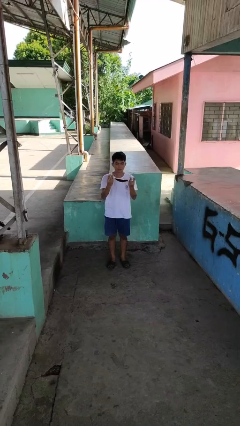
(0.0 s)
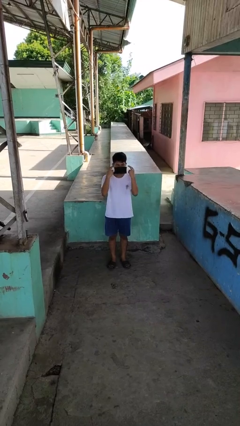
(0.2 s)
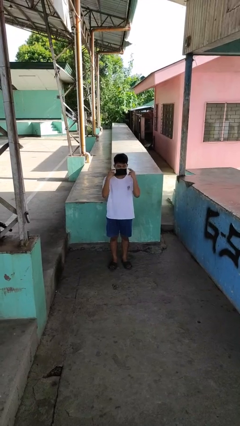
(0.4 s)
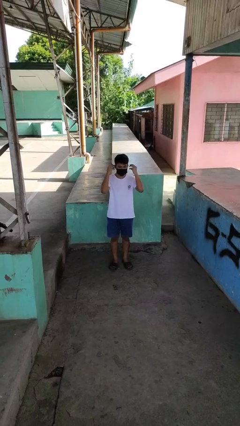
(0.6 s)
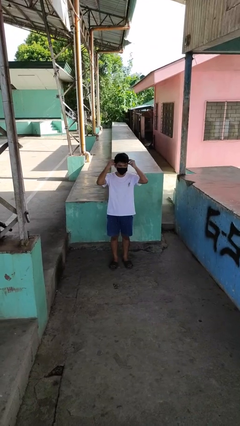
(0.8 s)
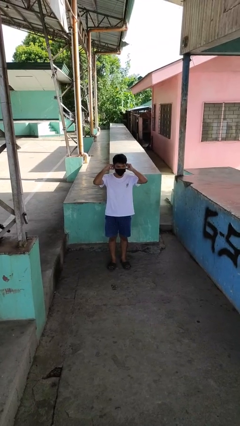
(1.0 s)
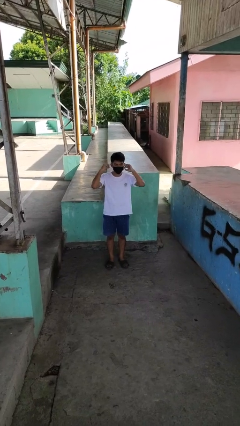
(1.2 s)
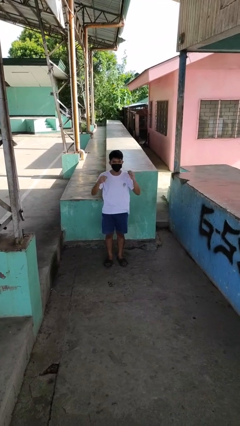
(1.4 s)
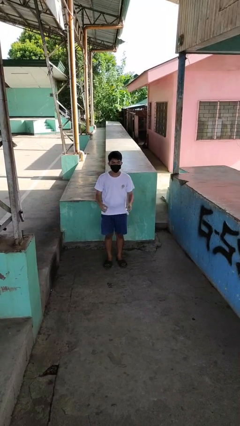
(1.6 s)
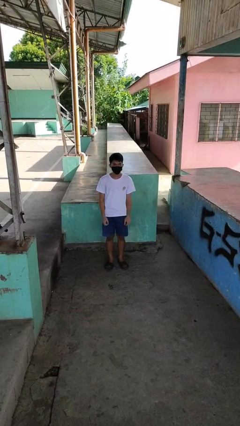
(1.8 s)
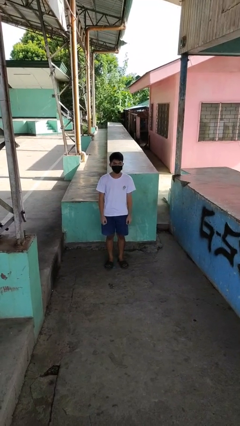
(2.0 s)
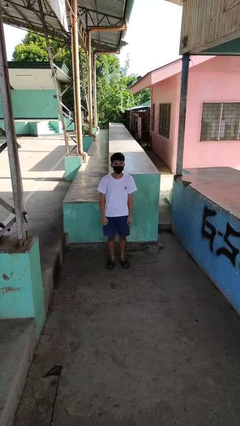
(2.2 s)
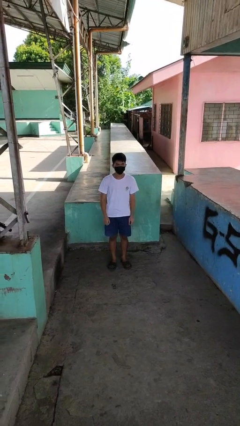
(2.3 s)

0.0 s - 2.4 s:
person puts on facemask

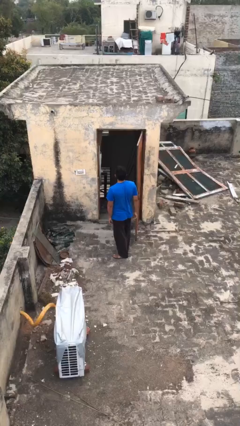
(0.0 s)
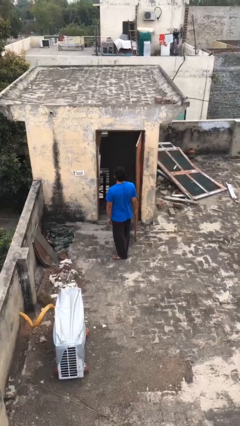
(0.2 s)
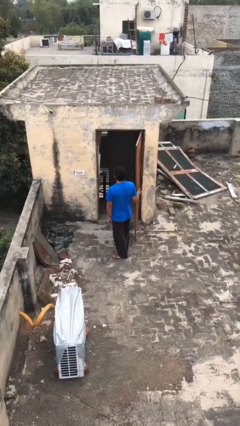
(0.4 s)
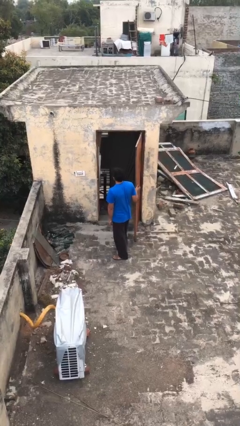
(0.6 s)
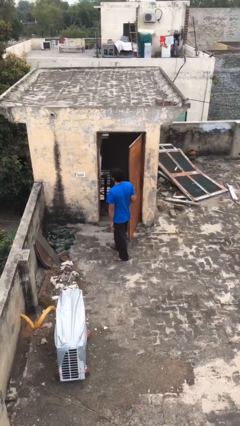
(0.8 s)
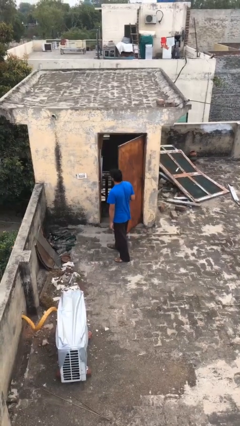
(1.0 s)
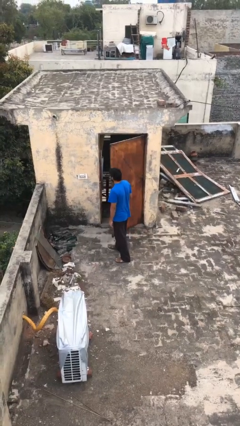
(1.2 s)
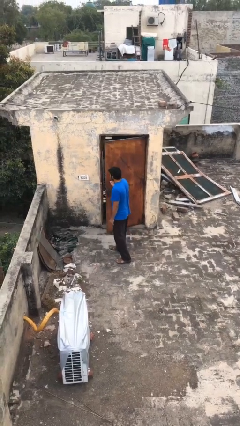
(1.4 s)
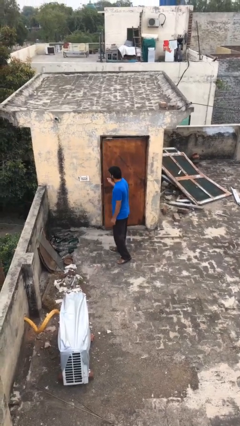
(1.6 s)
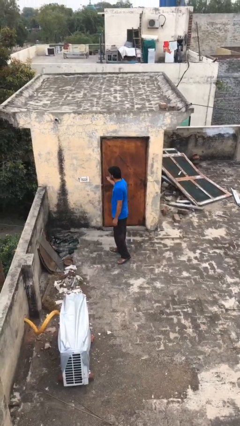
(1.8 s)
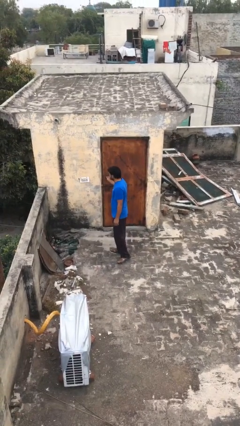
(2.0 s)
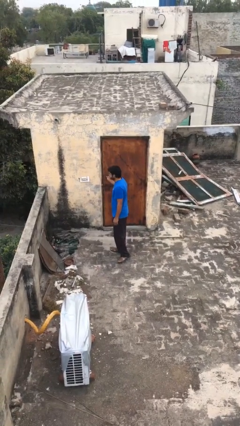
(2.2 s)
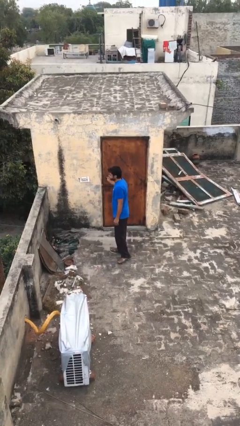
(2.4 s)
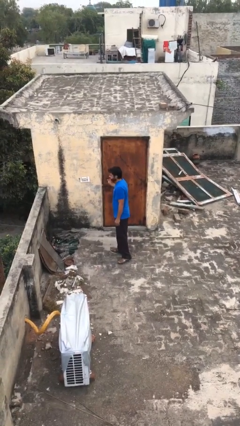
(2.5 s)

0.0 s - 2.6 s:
person closes facility door

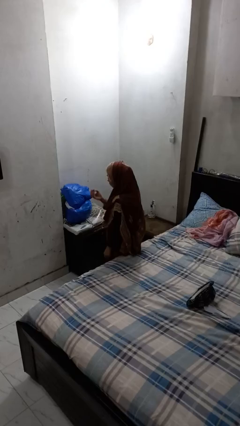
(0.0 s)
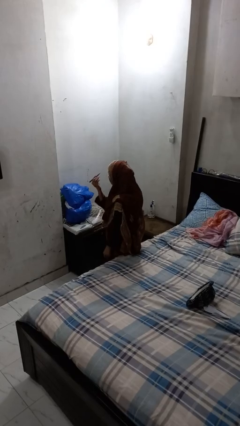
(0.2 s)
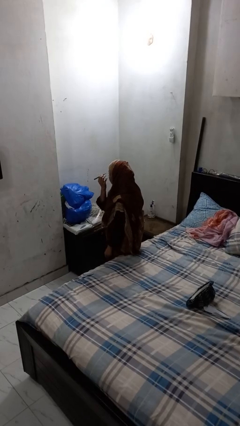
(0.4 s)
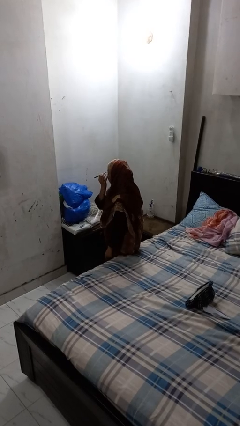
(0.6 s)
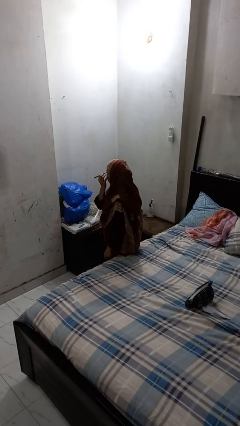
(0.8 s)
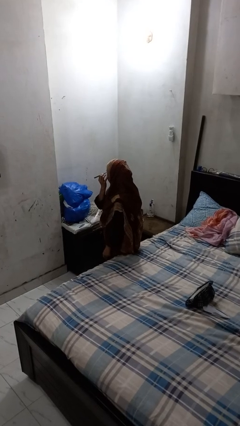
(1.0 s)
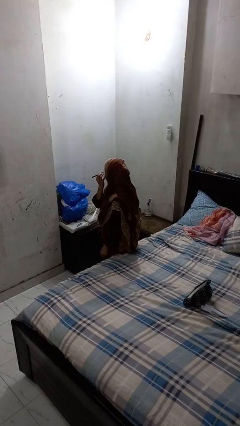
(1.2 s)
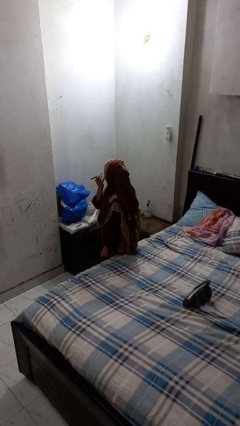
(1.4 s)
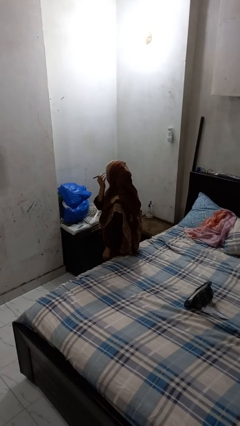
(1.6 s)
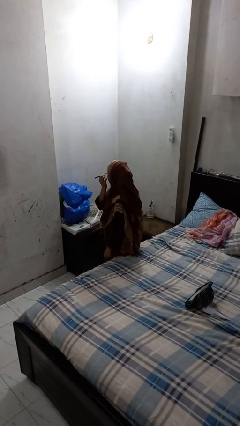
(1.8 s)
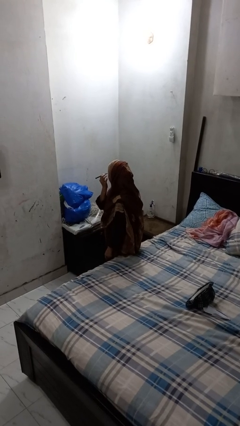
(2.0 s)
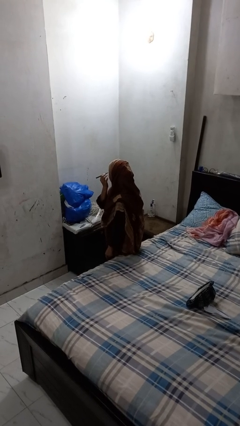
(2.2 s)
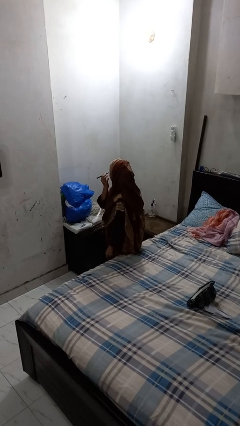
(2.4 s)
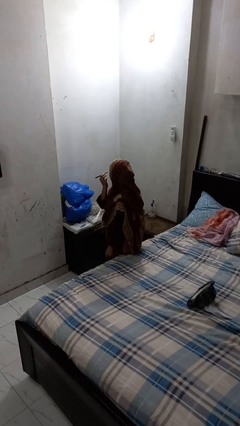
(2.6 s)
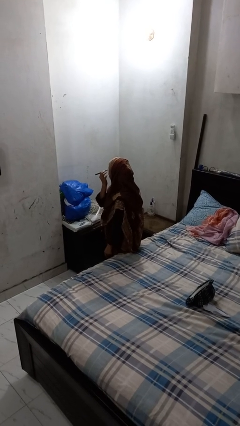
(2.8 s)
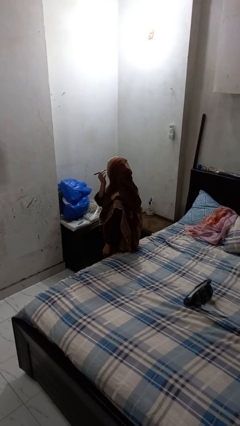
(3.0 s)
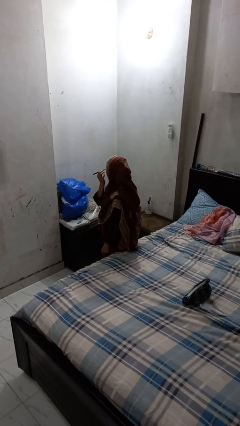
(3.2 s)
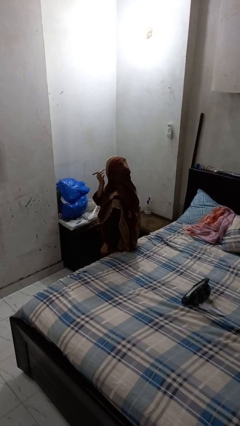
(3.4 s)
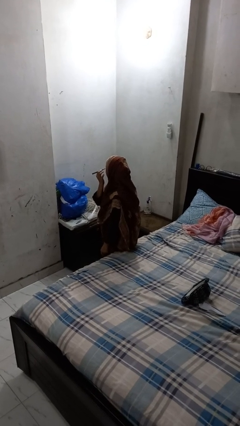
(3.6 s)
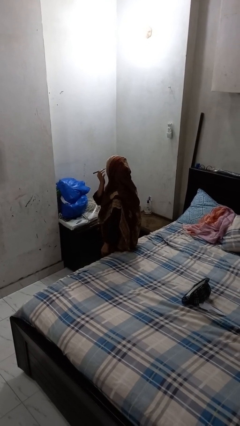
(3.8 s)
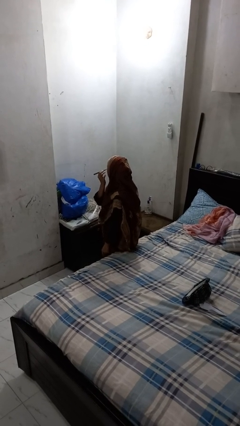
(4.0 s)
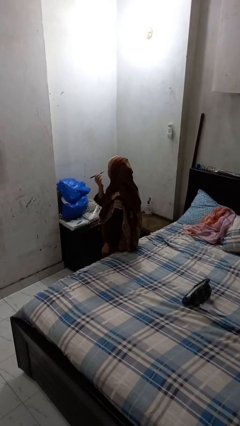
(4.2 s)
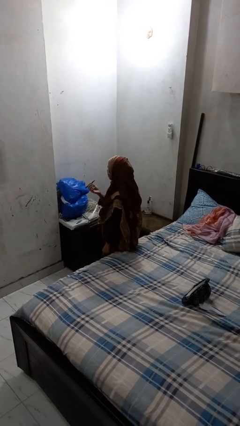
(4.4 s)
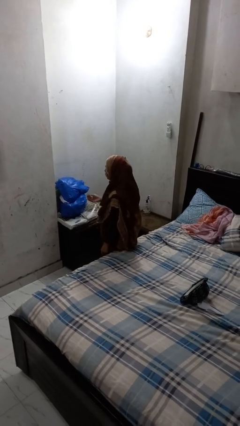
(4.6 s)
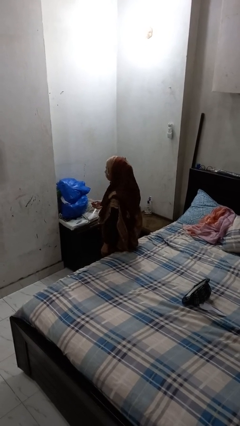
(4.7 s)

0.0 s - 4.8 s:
person applies eye makeup

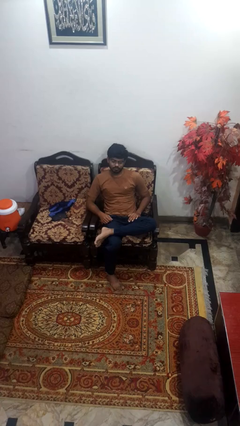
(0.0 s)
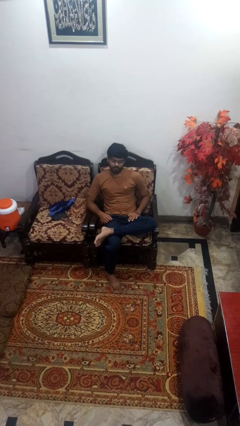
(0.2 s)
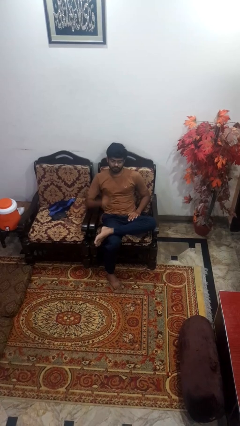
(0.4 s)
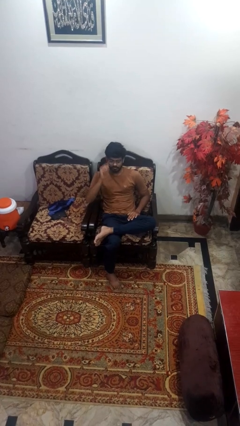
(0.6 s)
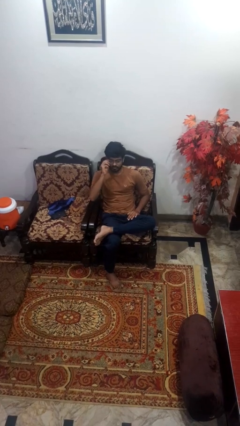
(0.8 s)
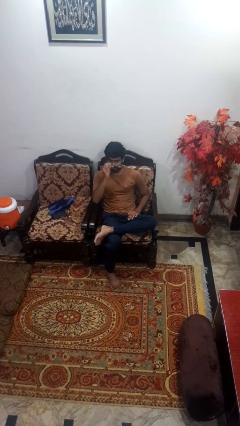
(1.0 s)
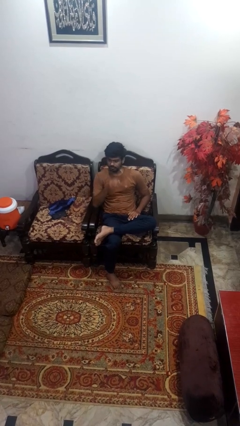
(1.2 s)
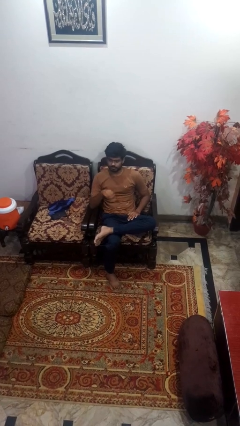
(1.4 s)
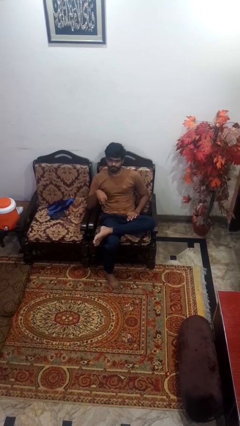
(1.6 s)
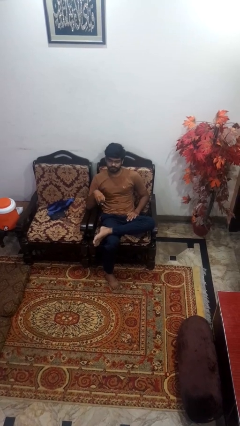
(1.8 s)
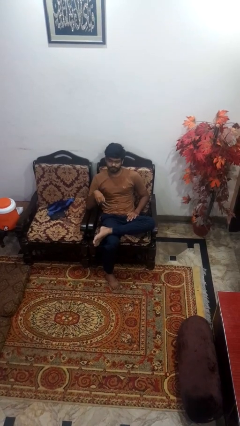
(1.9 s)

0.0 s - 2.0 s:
person takes off glasses

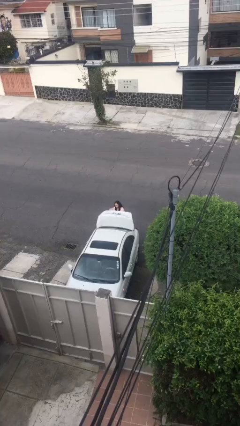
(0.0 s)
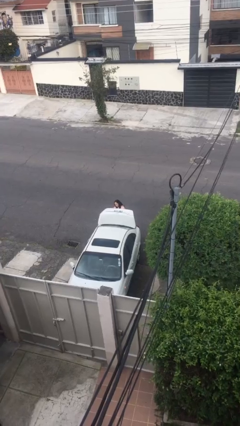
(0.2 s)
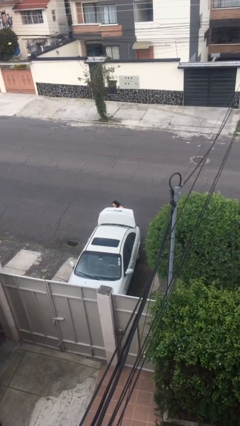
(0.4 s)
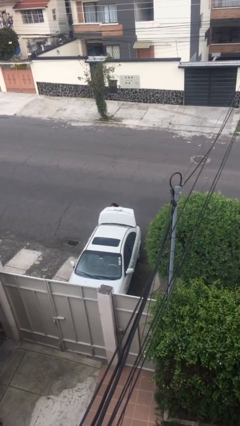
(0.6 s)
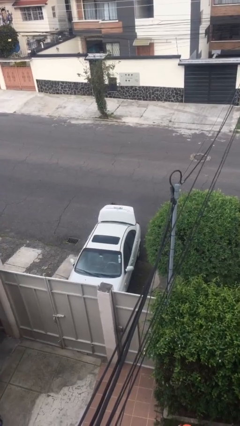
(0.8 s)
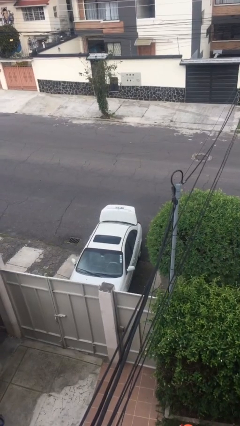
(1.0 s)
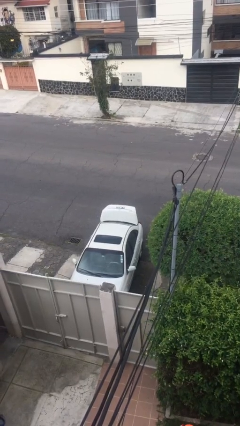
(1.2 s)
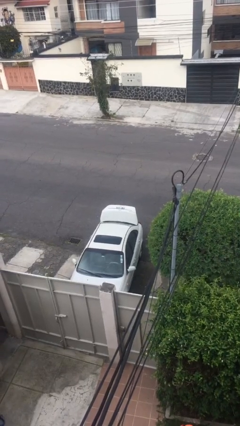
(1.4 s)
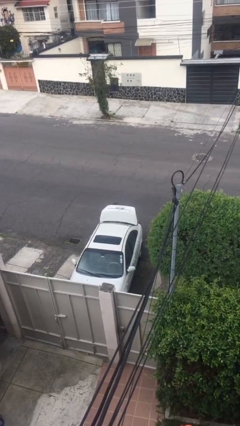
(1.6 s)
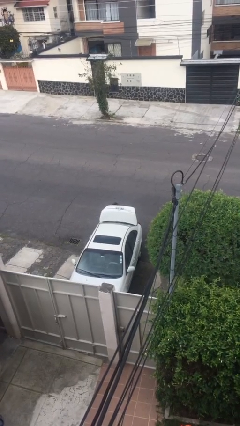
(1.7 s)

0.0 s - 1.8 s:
person loads car

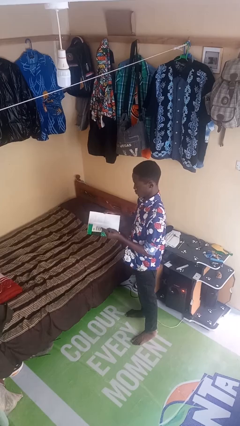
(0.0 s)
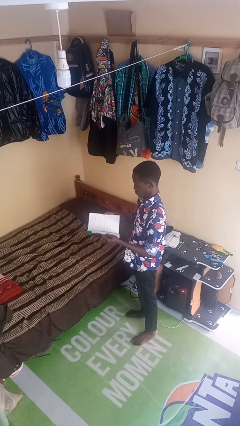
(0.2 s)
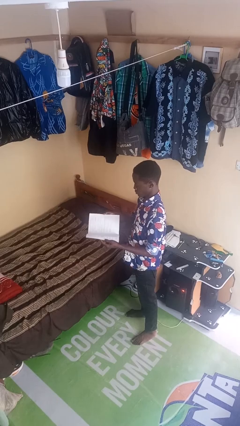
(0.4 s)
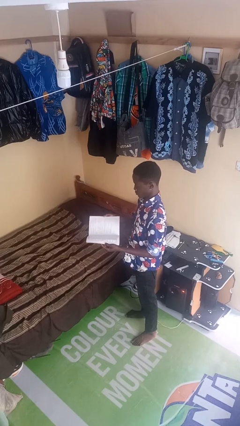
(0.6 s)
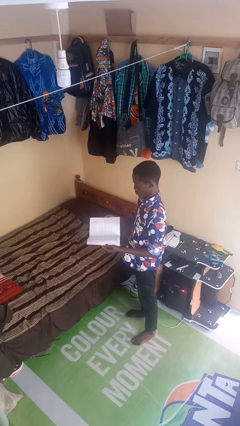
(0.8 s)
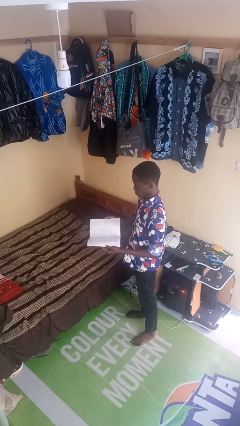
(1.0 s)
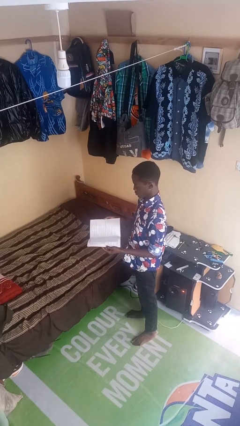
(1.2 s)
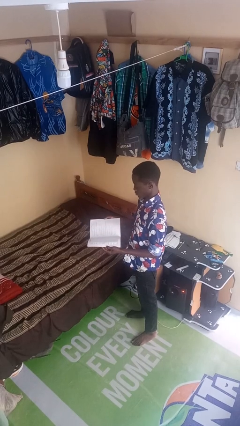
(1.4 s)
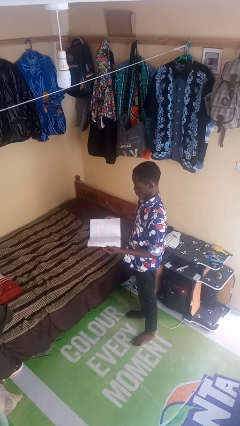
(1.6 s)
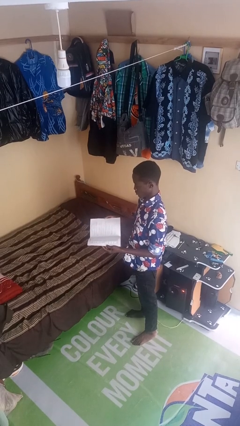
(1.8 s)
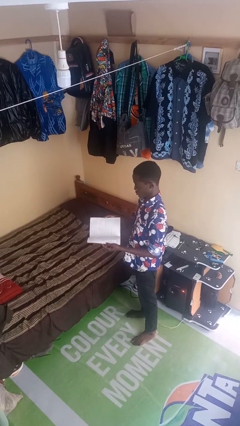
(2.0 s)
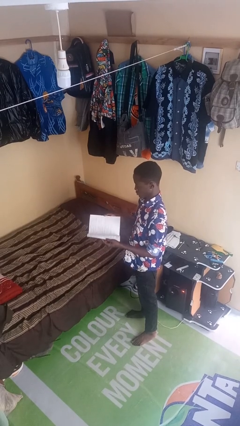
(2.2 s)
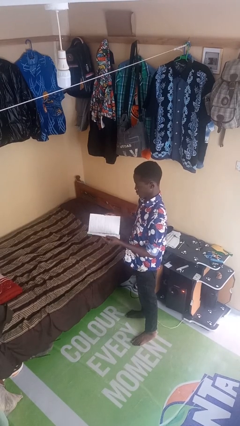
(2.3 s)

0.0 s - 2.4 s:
person reads magazine

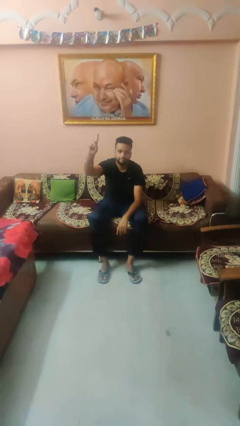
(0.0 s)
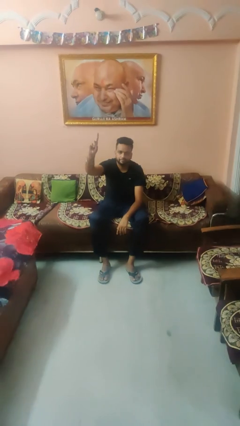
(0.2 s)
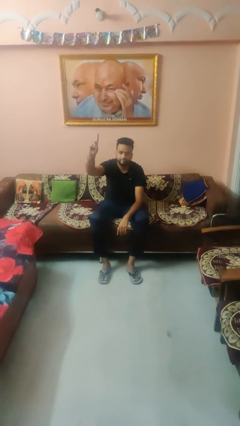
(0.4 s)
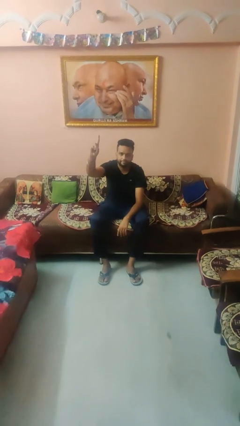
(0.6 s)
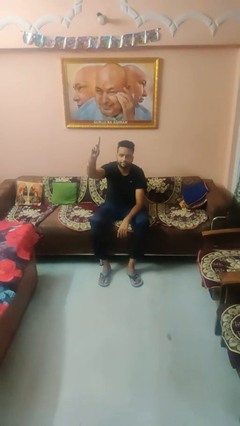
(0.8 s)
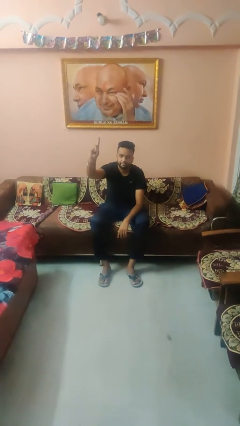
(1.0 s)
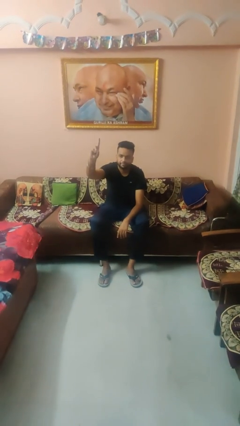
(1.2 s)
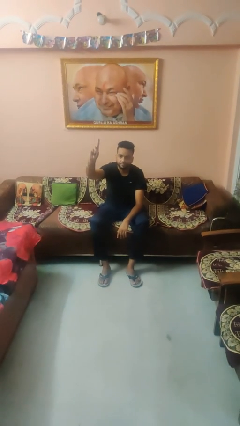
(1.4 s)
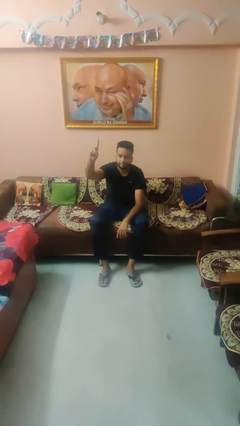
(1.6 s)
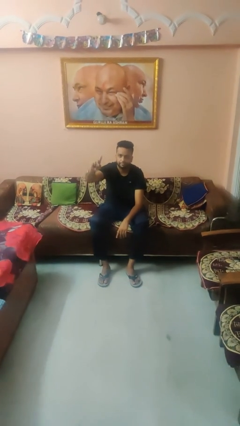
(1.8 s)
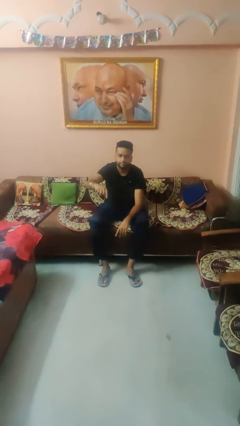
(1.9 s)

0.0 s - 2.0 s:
person gestures number one
